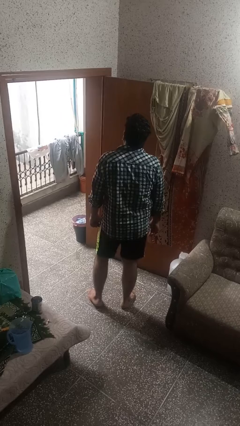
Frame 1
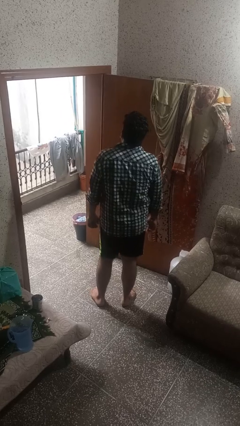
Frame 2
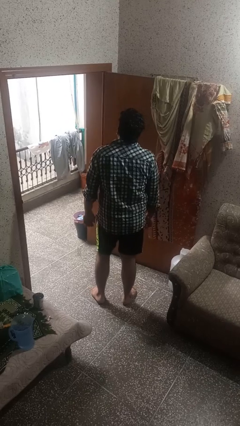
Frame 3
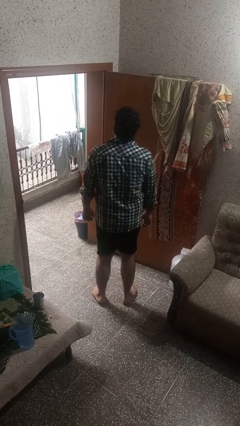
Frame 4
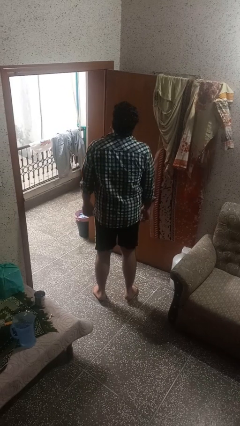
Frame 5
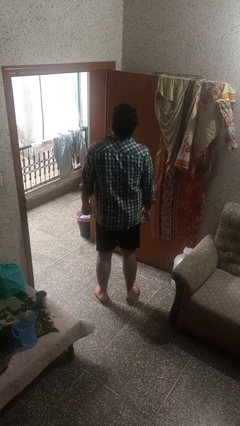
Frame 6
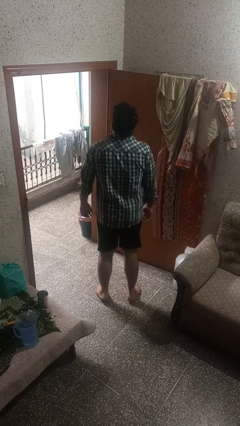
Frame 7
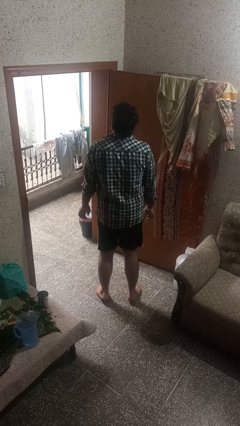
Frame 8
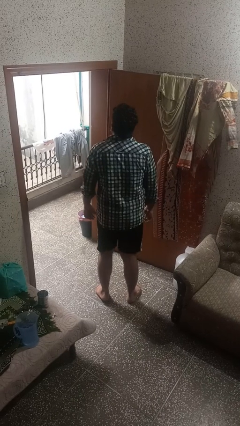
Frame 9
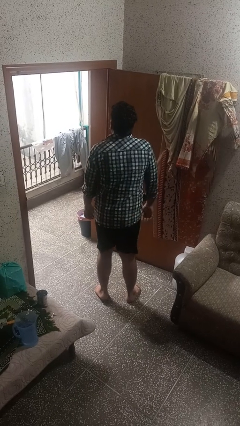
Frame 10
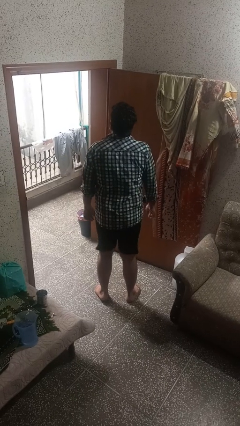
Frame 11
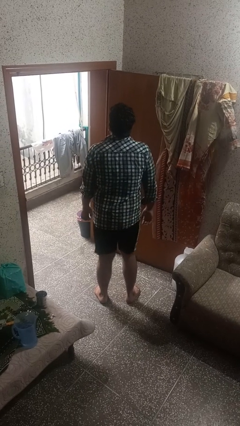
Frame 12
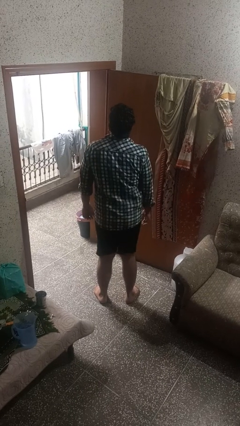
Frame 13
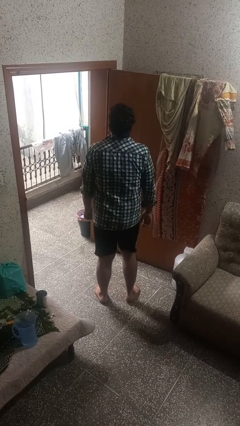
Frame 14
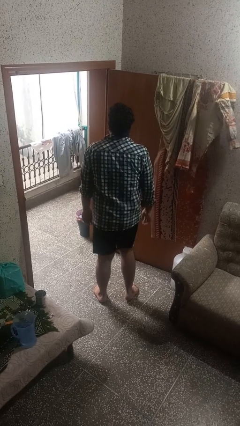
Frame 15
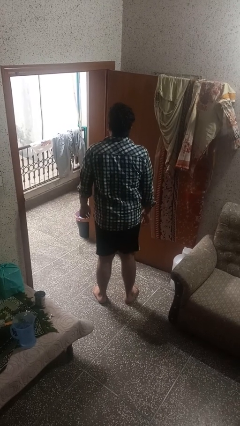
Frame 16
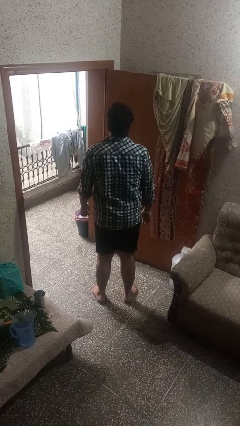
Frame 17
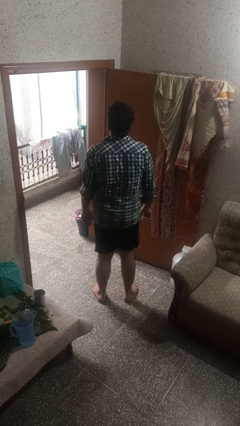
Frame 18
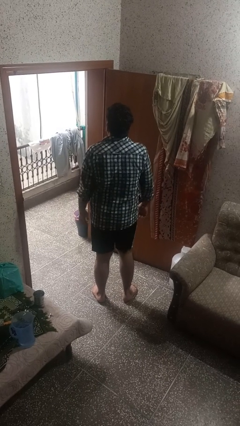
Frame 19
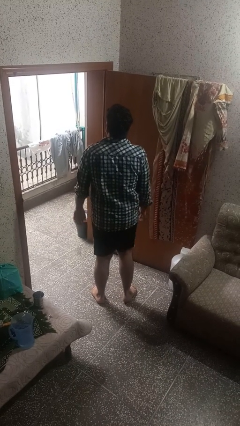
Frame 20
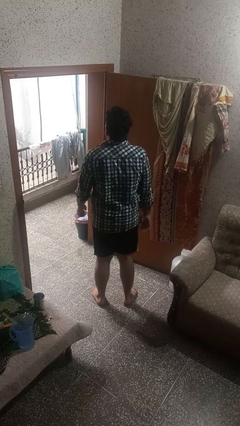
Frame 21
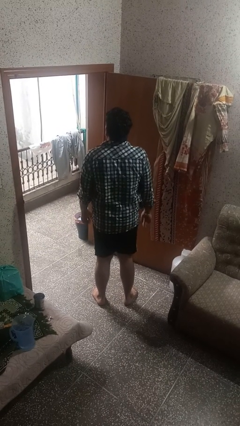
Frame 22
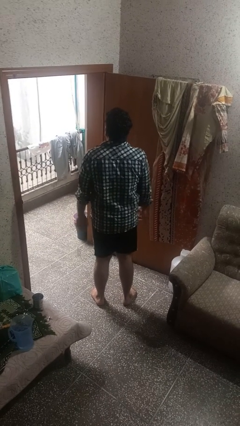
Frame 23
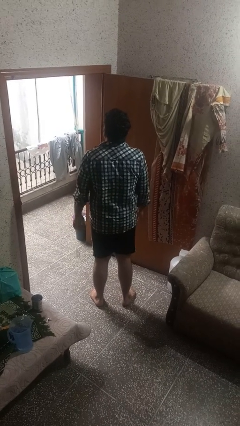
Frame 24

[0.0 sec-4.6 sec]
person wiggles hips

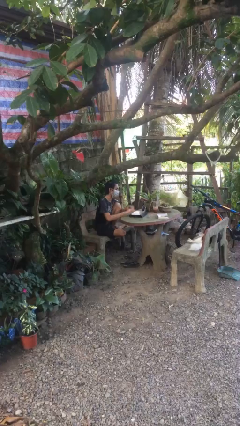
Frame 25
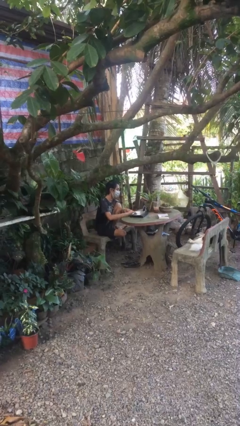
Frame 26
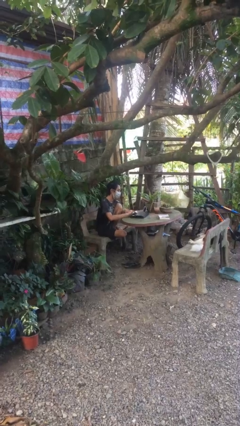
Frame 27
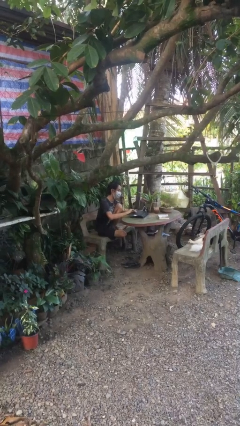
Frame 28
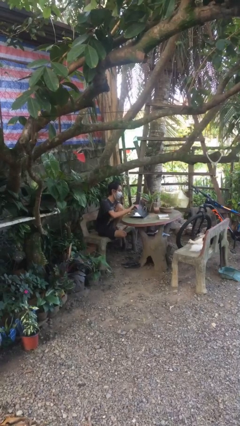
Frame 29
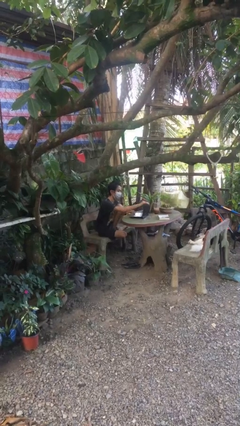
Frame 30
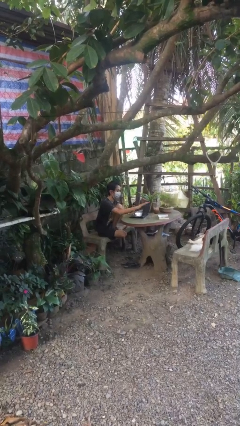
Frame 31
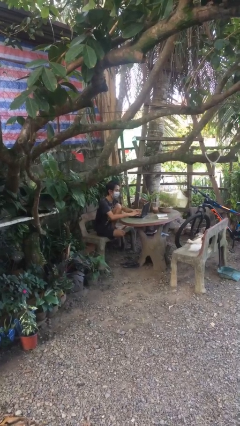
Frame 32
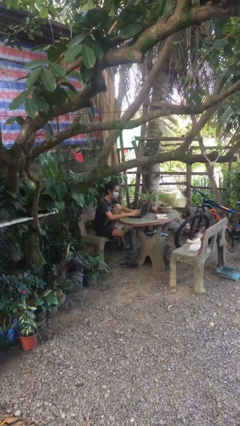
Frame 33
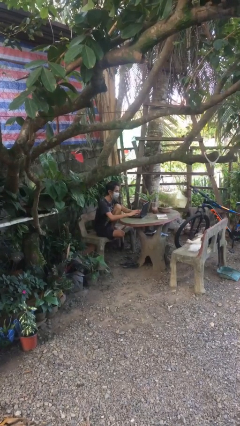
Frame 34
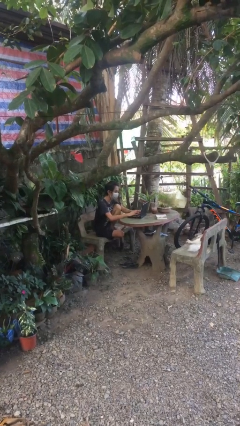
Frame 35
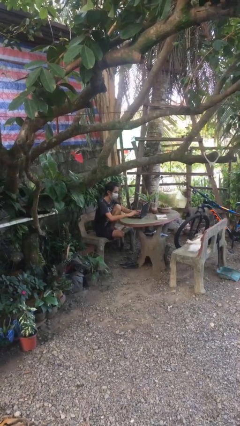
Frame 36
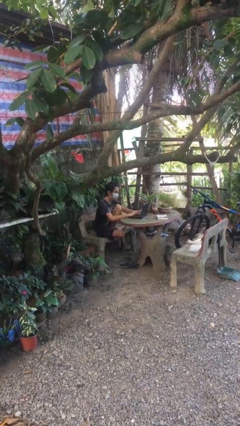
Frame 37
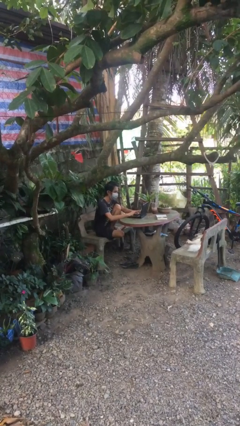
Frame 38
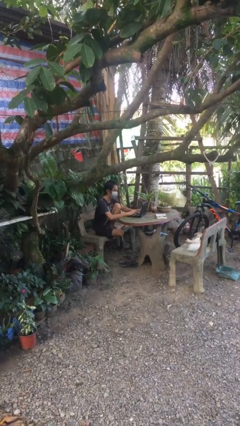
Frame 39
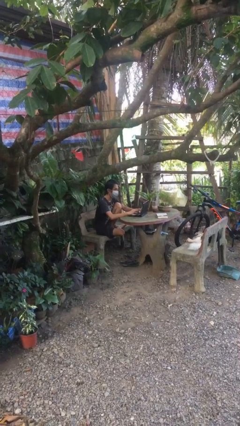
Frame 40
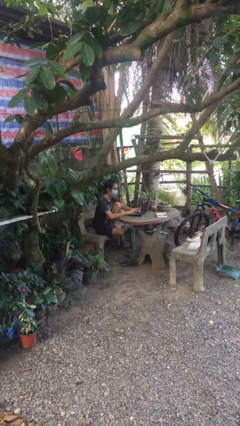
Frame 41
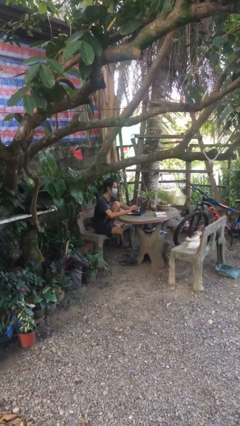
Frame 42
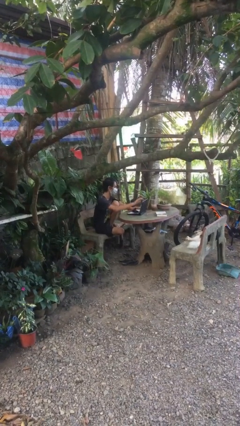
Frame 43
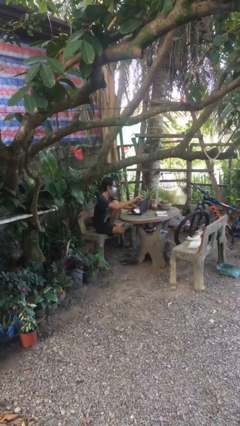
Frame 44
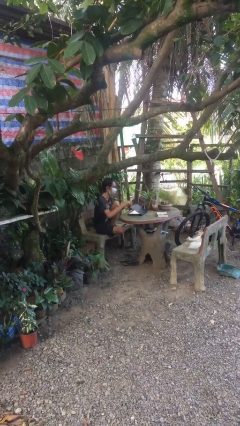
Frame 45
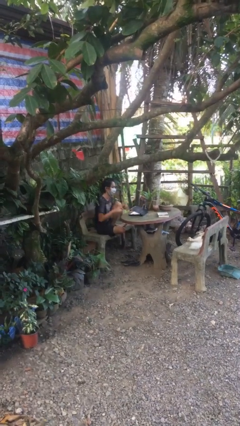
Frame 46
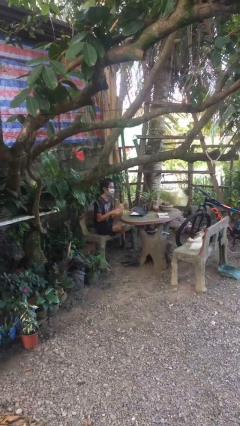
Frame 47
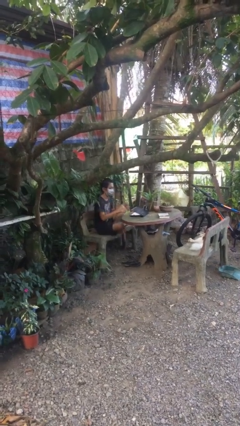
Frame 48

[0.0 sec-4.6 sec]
person interacts with laptop

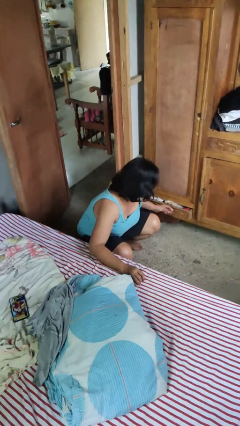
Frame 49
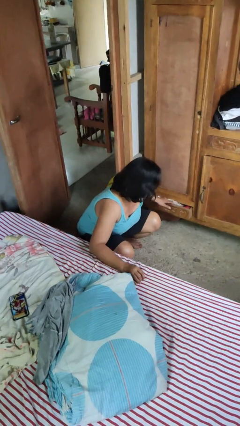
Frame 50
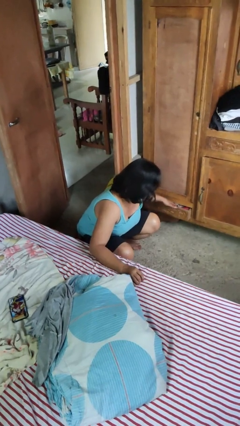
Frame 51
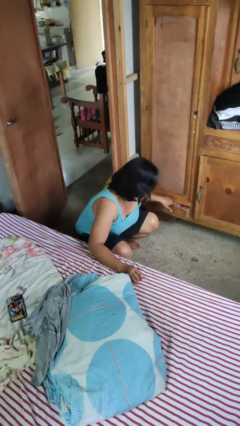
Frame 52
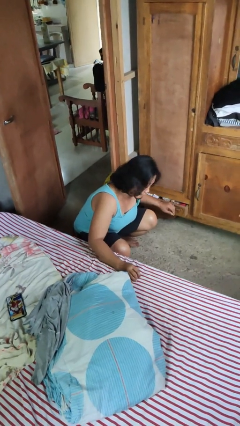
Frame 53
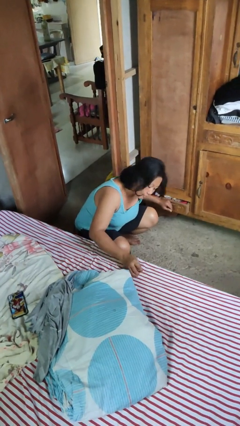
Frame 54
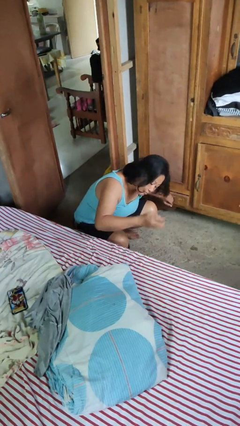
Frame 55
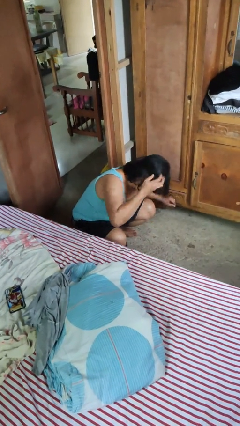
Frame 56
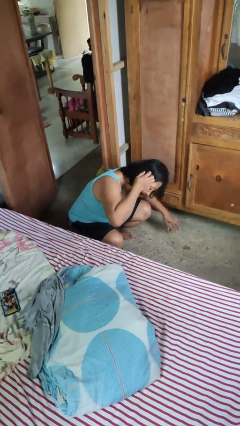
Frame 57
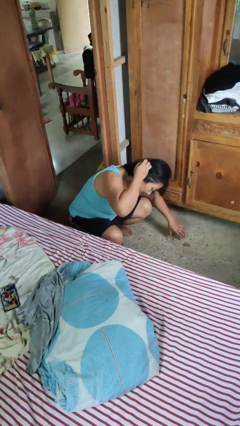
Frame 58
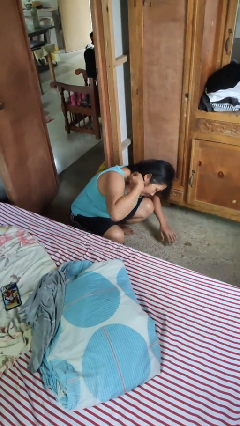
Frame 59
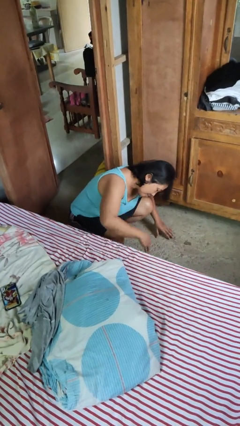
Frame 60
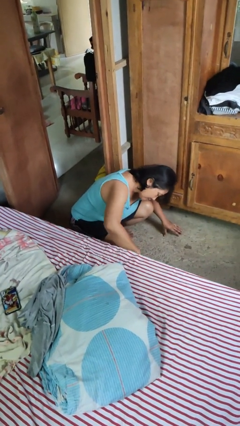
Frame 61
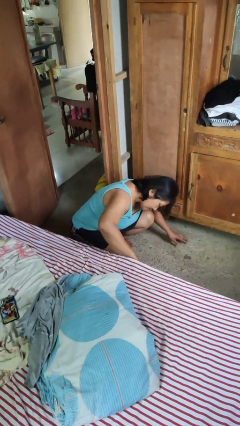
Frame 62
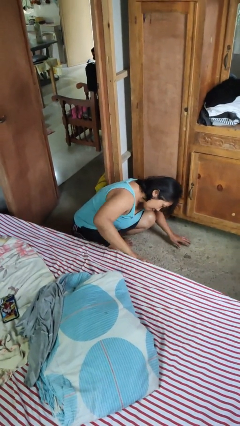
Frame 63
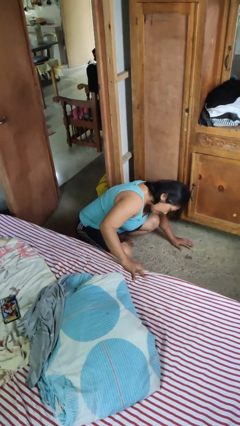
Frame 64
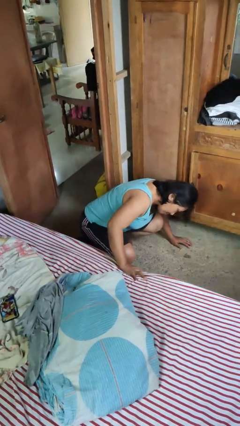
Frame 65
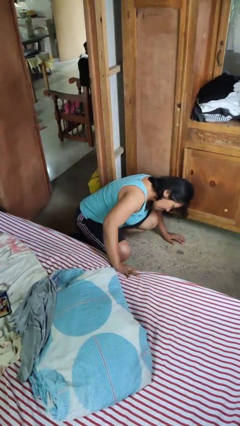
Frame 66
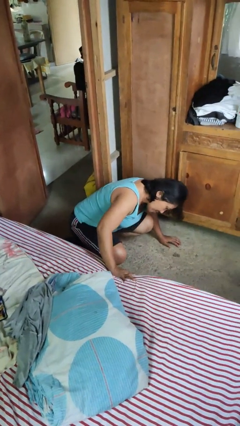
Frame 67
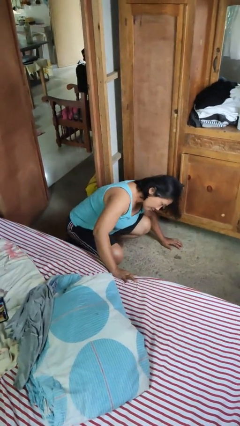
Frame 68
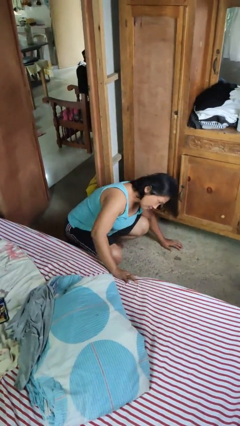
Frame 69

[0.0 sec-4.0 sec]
person searches under bed

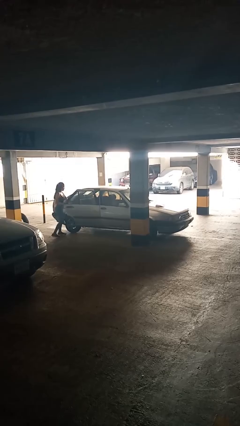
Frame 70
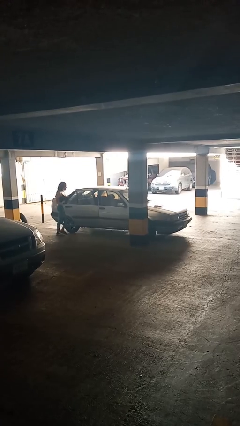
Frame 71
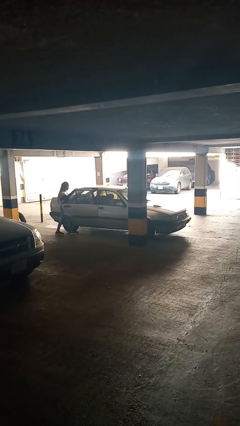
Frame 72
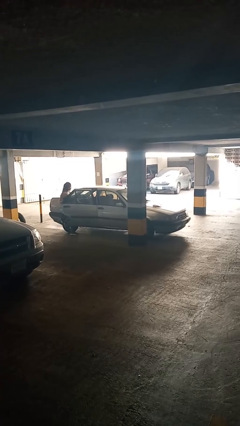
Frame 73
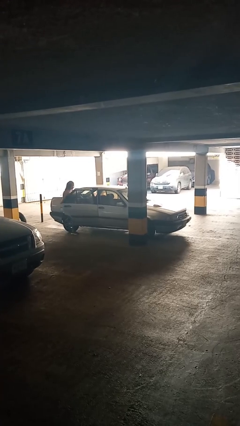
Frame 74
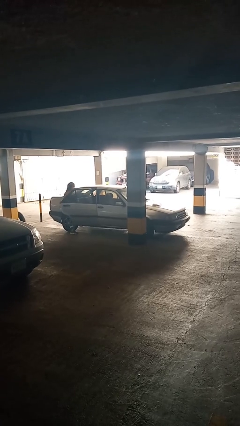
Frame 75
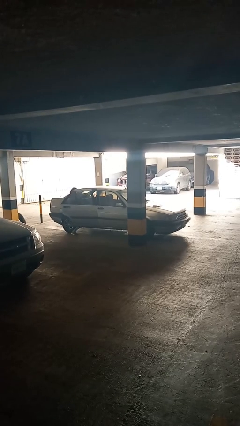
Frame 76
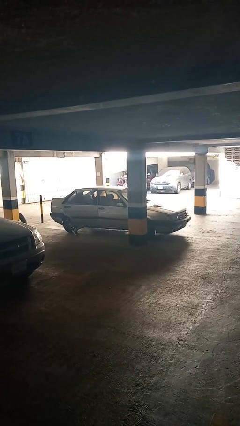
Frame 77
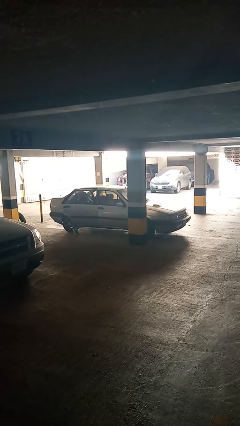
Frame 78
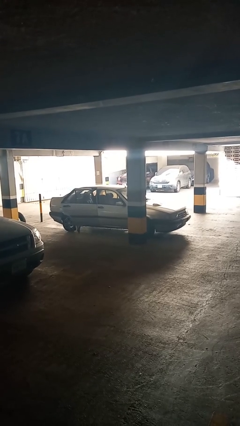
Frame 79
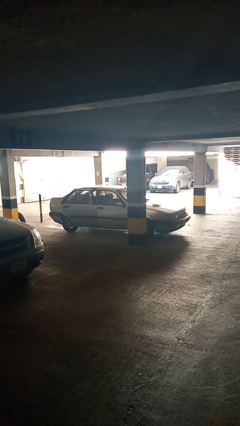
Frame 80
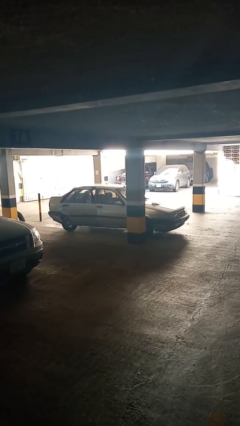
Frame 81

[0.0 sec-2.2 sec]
car picks up person

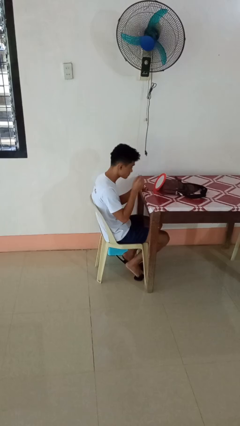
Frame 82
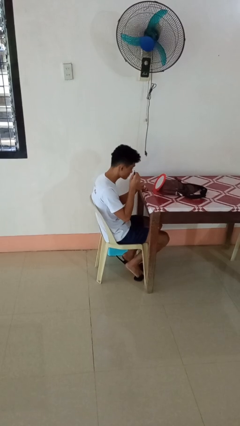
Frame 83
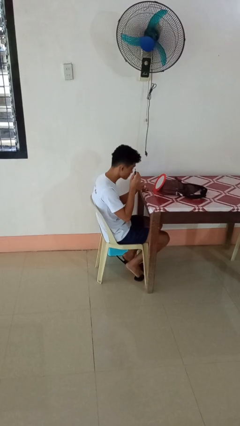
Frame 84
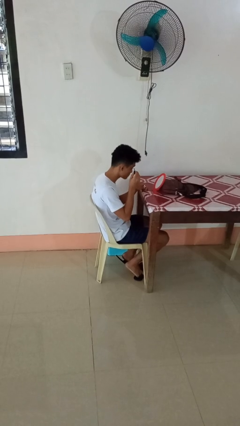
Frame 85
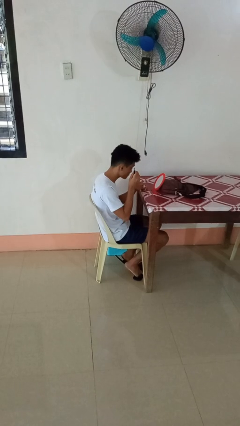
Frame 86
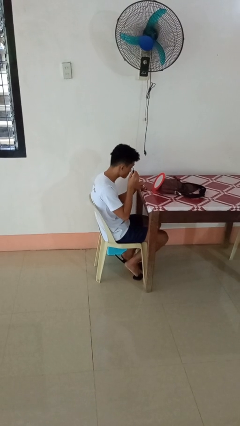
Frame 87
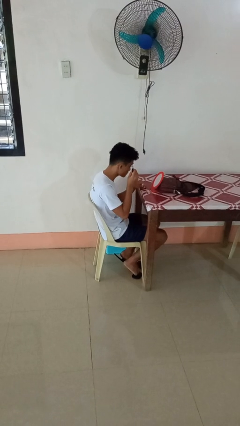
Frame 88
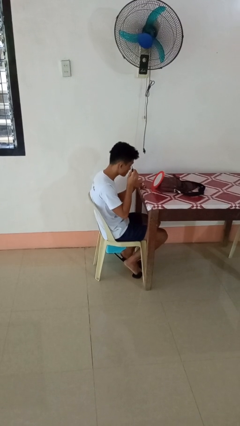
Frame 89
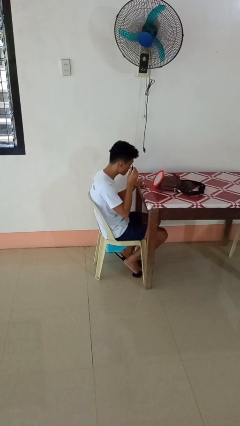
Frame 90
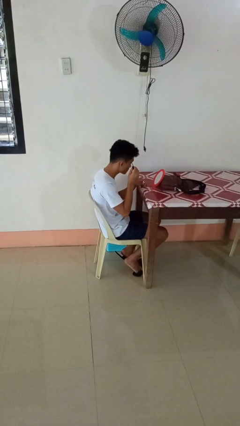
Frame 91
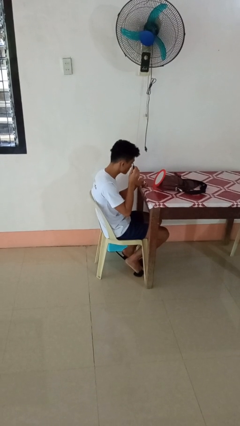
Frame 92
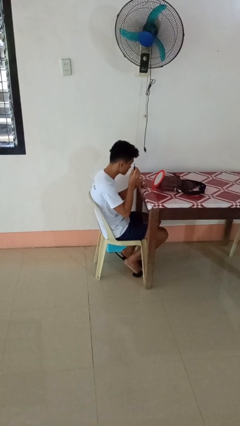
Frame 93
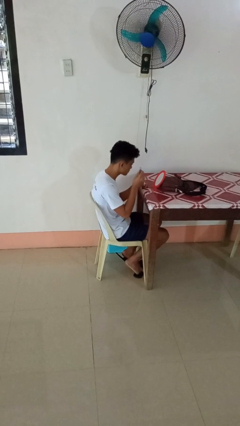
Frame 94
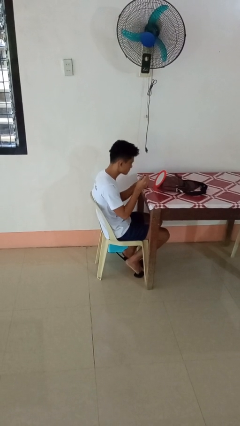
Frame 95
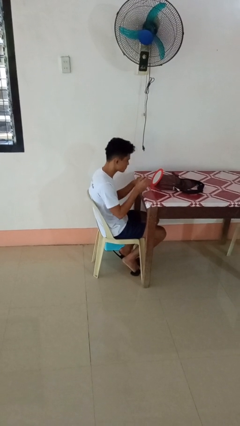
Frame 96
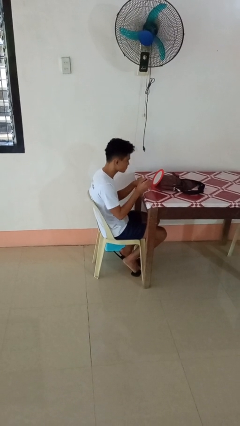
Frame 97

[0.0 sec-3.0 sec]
person applies eye makeup
